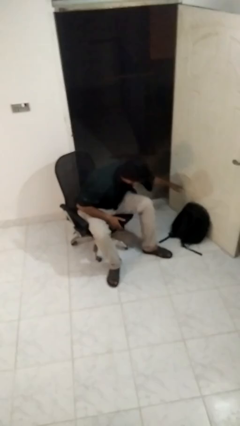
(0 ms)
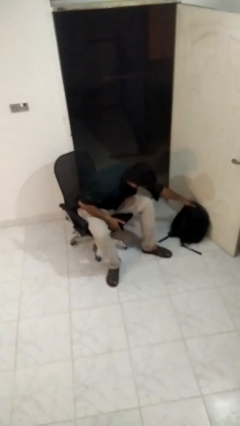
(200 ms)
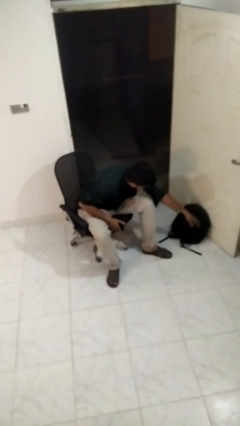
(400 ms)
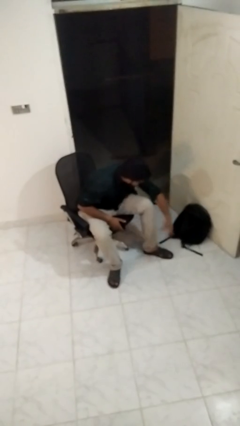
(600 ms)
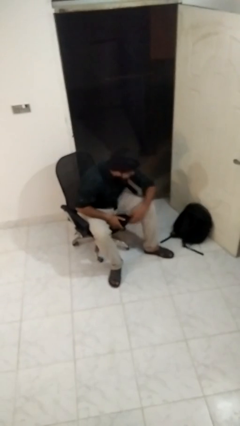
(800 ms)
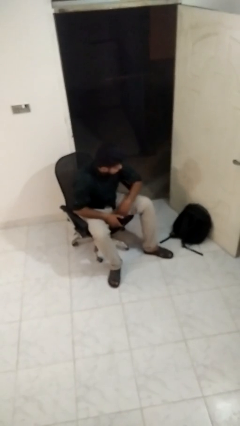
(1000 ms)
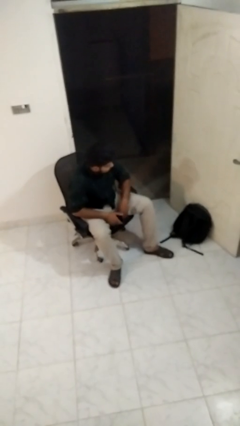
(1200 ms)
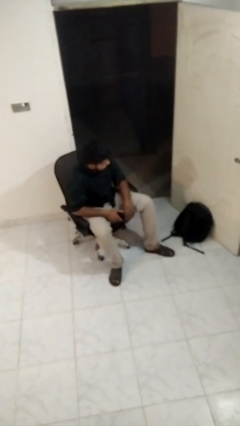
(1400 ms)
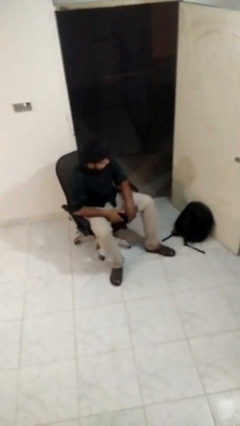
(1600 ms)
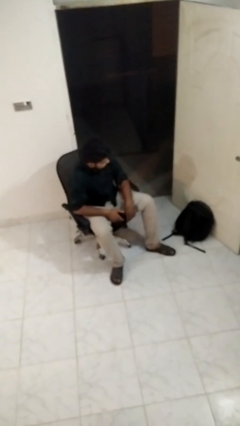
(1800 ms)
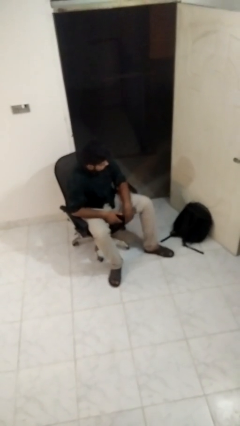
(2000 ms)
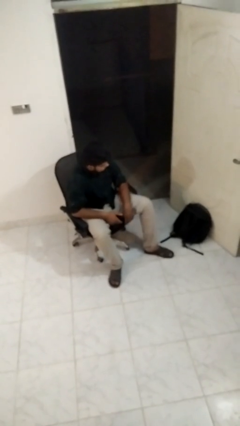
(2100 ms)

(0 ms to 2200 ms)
person waves hand over object

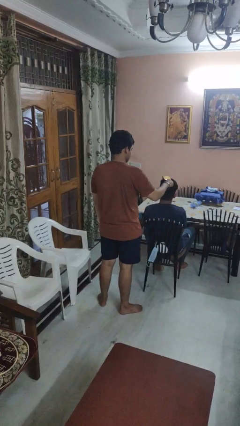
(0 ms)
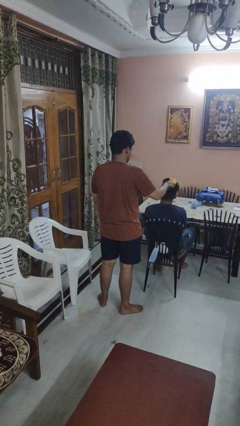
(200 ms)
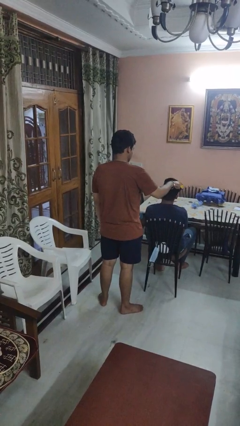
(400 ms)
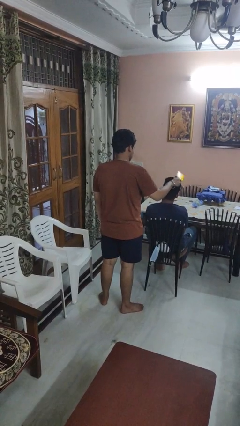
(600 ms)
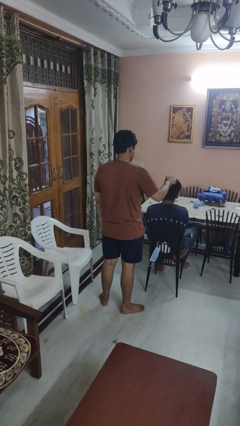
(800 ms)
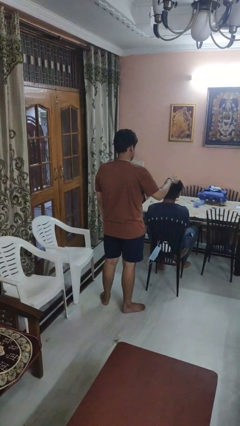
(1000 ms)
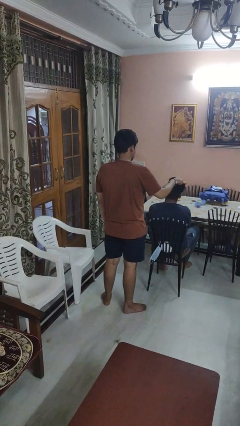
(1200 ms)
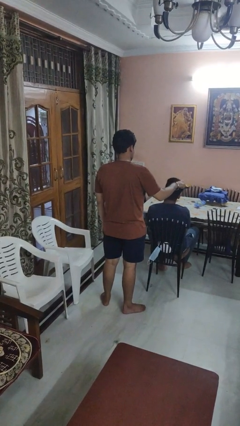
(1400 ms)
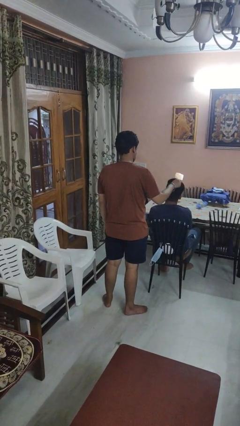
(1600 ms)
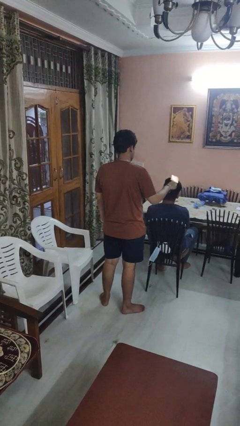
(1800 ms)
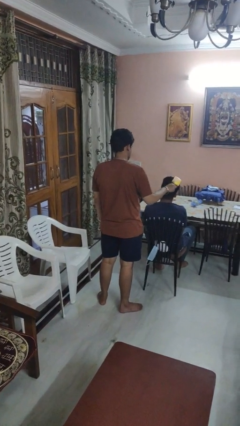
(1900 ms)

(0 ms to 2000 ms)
person brushes hair of person

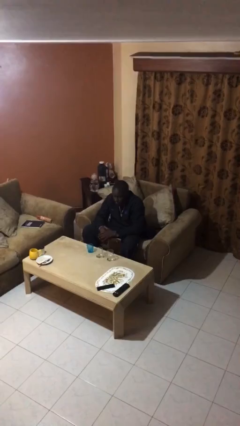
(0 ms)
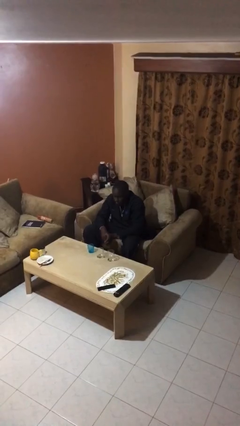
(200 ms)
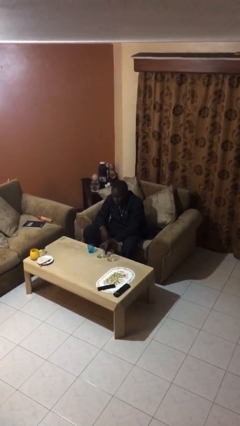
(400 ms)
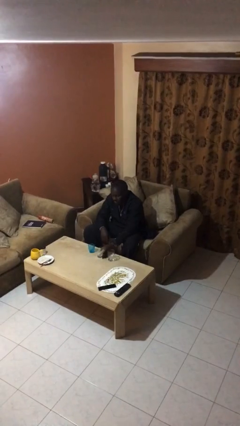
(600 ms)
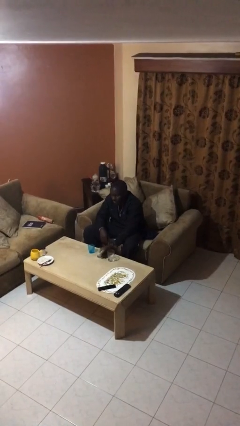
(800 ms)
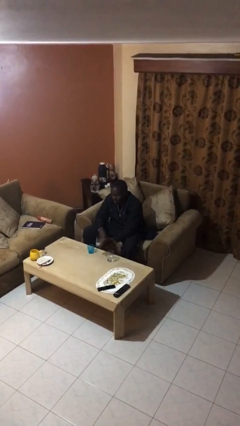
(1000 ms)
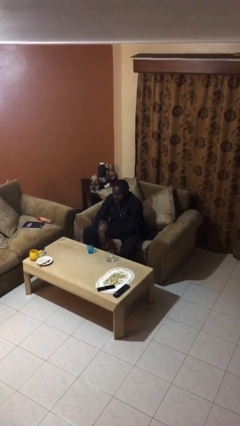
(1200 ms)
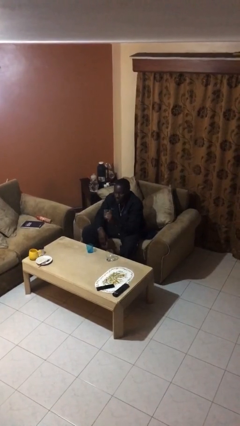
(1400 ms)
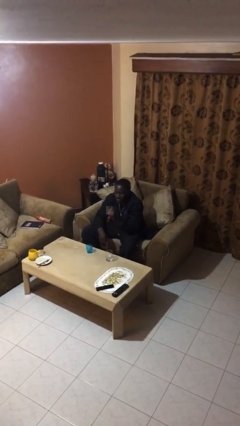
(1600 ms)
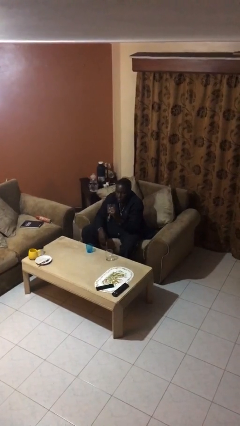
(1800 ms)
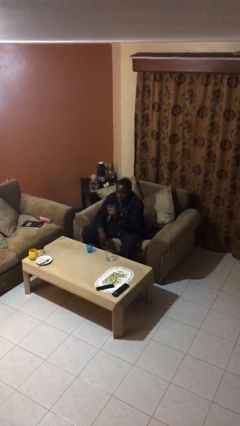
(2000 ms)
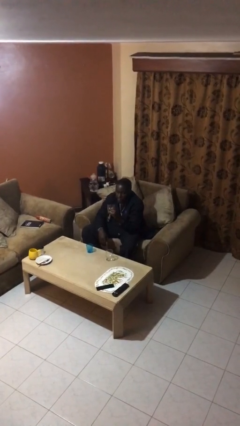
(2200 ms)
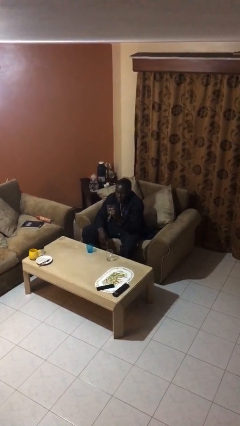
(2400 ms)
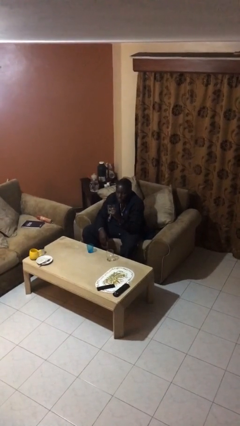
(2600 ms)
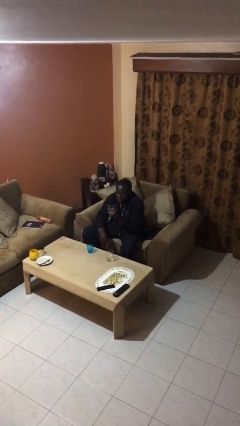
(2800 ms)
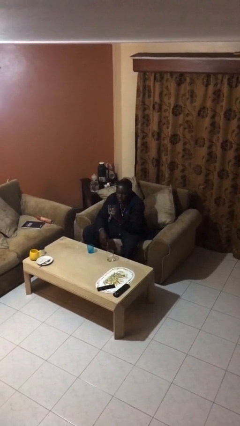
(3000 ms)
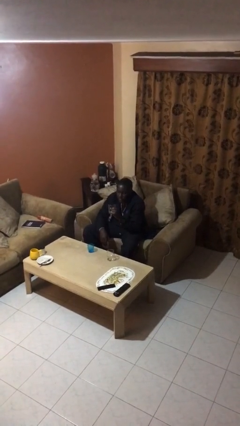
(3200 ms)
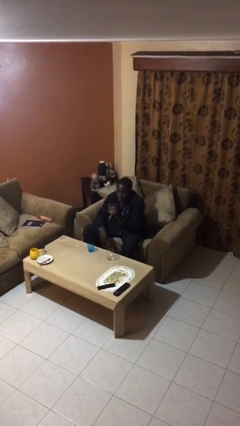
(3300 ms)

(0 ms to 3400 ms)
person picks up object from table

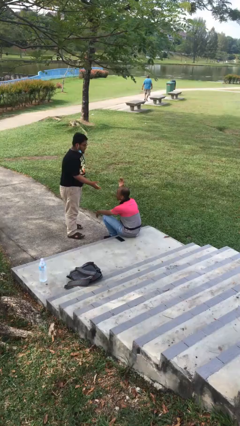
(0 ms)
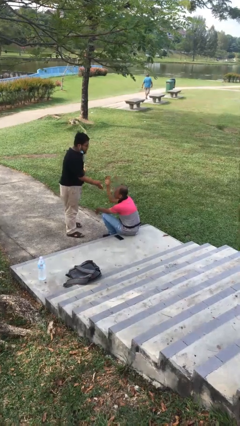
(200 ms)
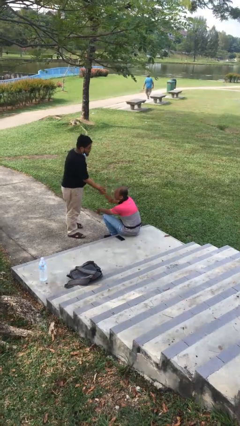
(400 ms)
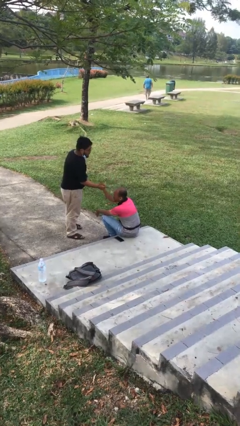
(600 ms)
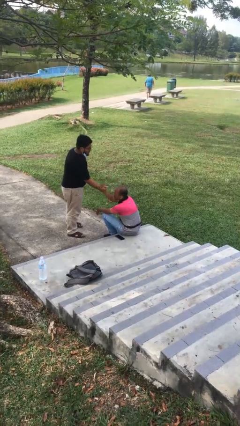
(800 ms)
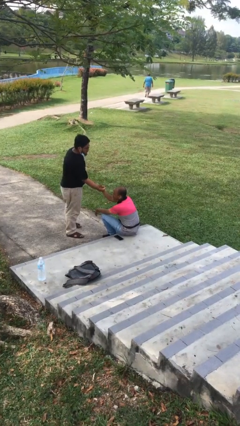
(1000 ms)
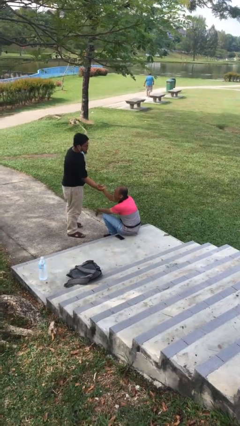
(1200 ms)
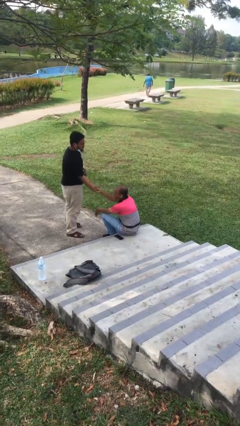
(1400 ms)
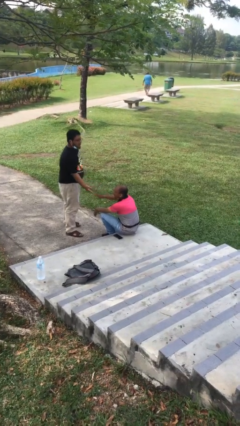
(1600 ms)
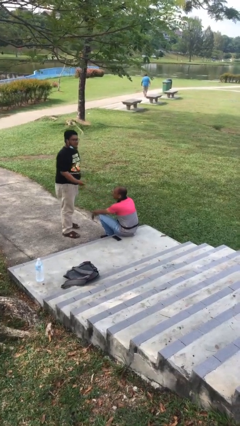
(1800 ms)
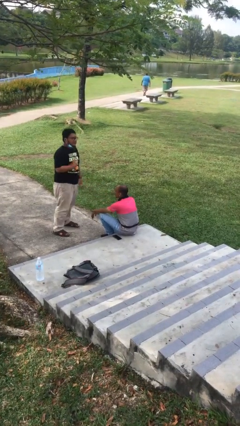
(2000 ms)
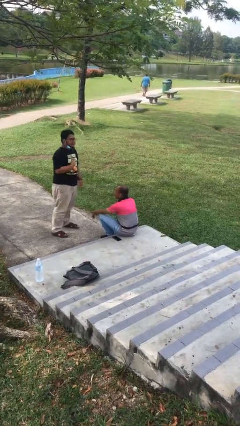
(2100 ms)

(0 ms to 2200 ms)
person shakes hand

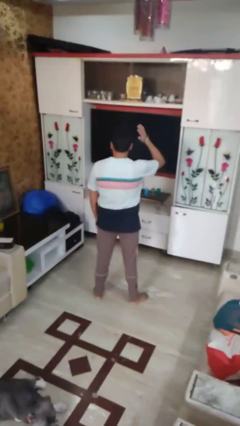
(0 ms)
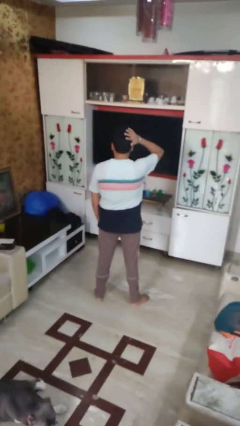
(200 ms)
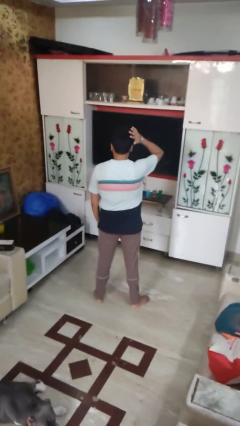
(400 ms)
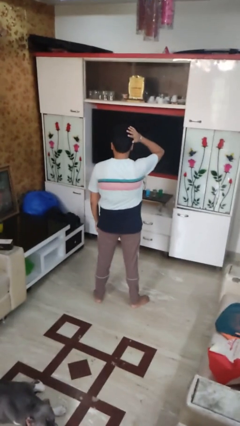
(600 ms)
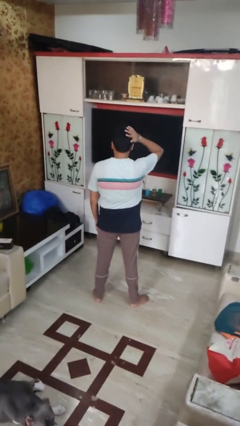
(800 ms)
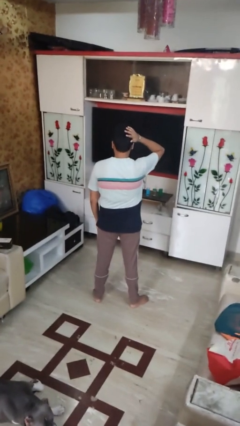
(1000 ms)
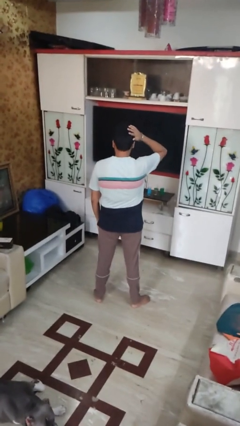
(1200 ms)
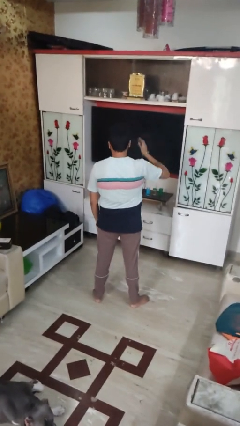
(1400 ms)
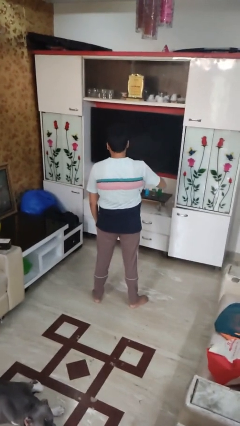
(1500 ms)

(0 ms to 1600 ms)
person pats head

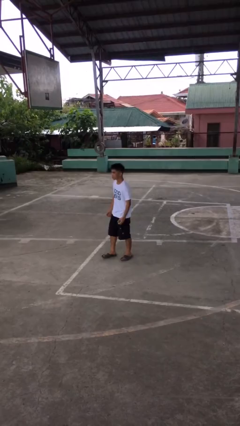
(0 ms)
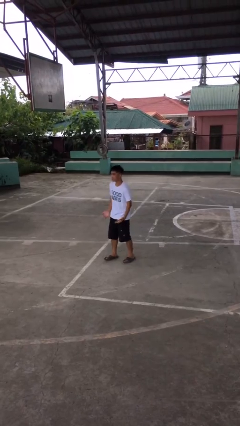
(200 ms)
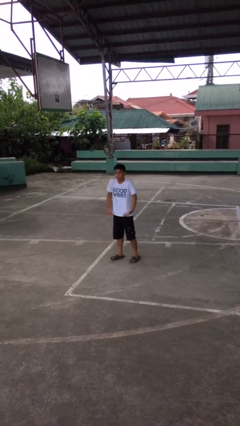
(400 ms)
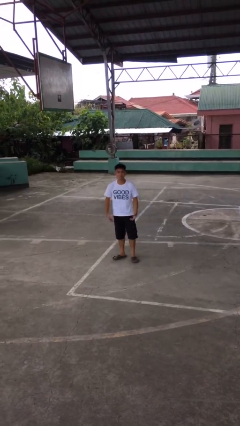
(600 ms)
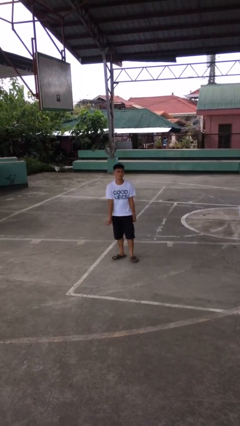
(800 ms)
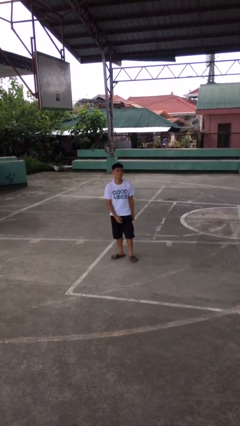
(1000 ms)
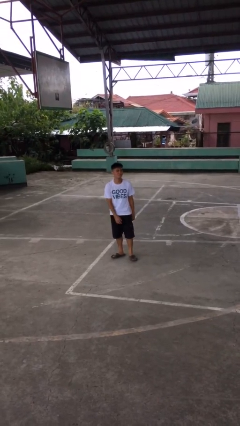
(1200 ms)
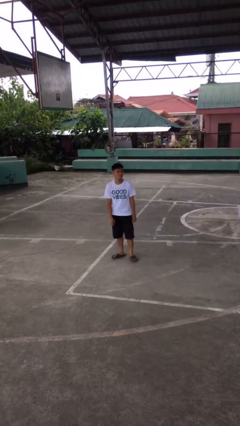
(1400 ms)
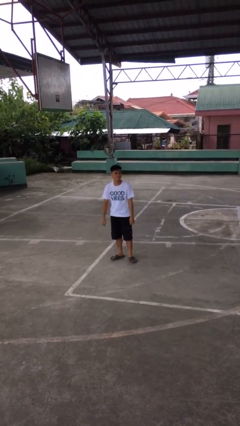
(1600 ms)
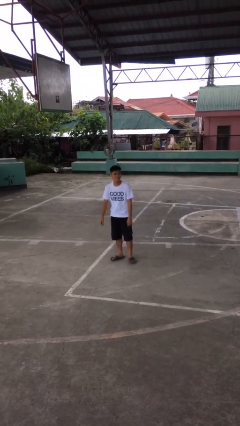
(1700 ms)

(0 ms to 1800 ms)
person shrugs

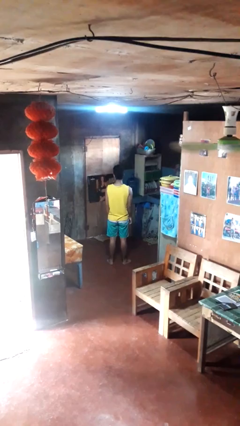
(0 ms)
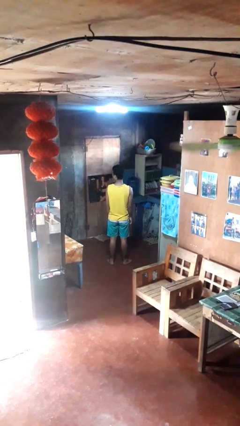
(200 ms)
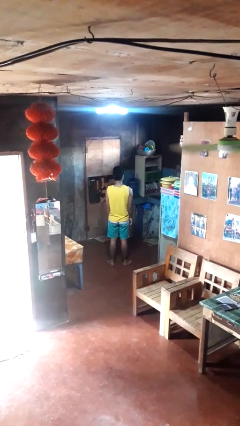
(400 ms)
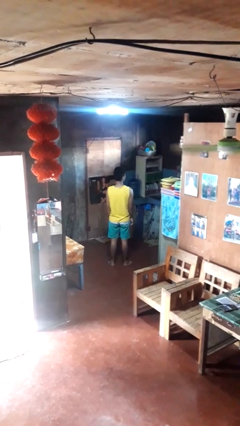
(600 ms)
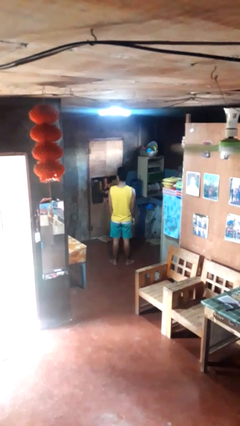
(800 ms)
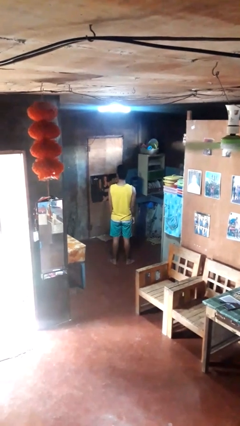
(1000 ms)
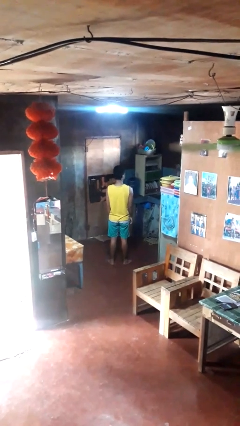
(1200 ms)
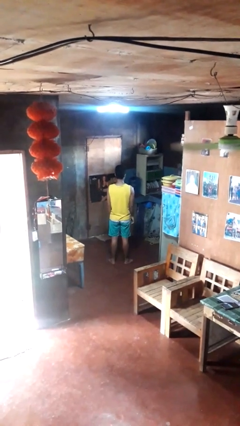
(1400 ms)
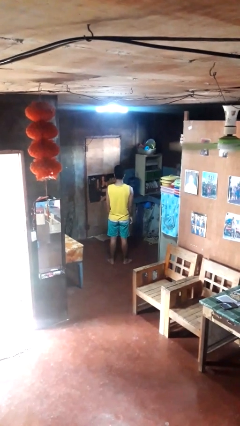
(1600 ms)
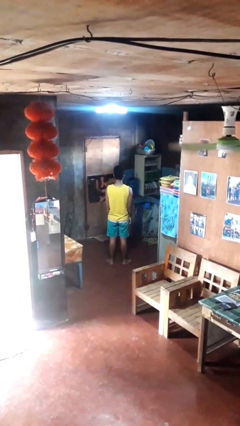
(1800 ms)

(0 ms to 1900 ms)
person shakes head

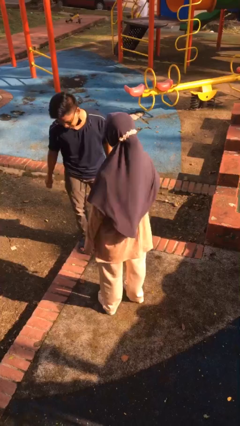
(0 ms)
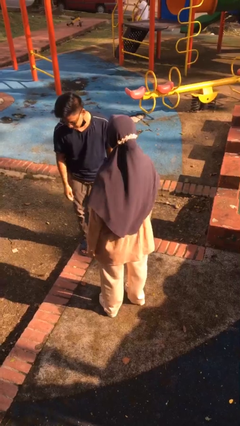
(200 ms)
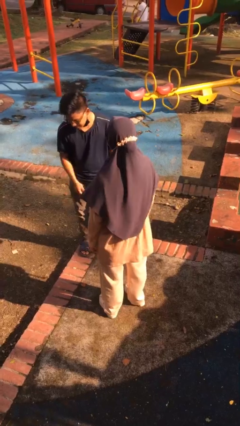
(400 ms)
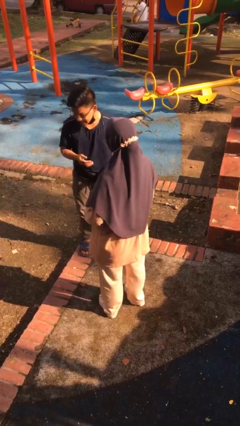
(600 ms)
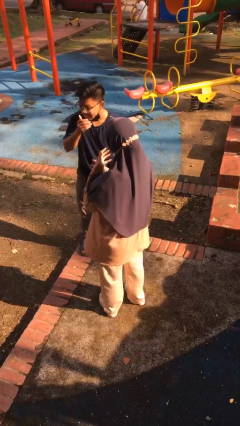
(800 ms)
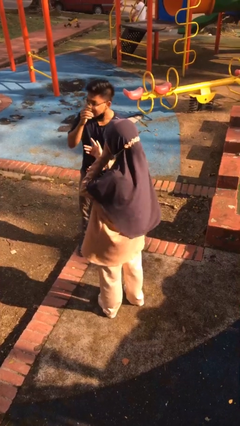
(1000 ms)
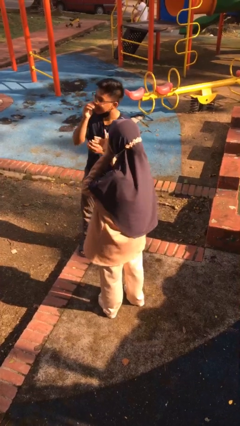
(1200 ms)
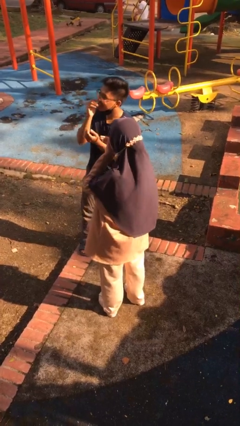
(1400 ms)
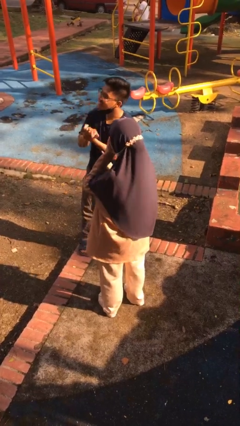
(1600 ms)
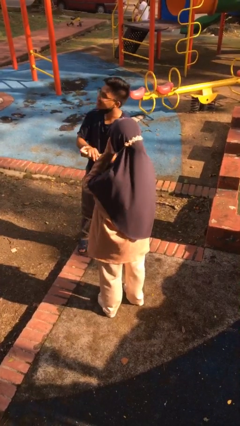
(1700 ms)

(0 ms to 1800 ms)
person laughs with person
